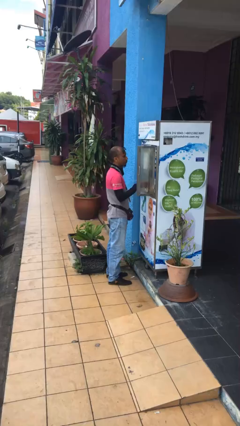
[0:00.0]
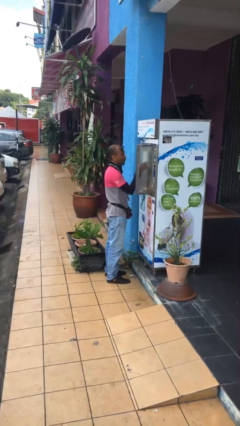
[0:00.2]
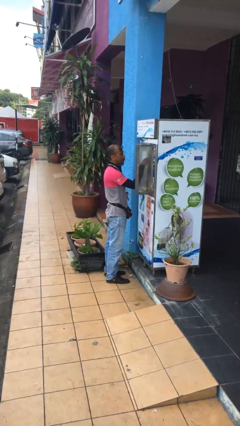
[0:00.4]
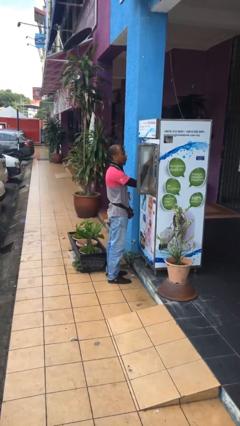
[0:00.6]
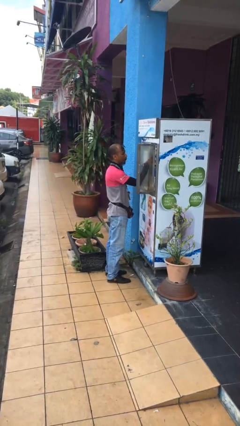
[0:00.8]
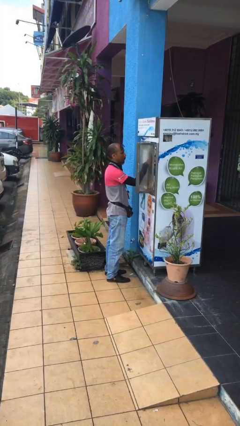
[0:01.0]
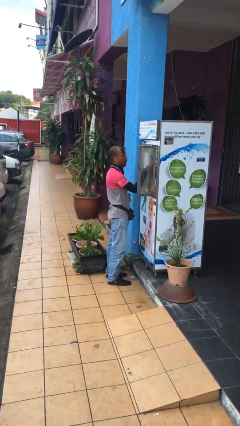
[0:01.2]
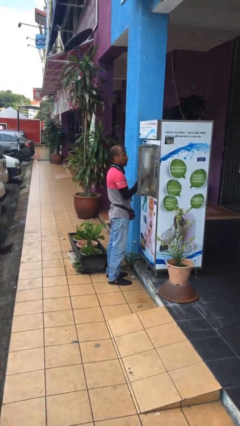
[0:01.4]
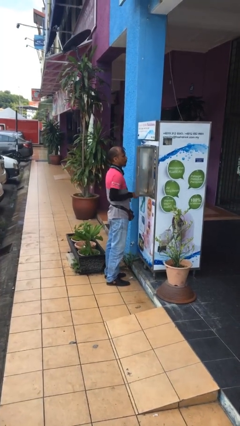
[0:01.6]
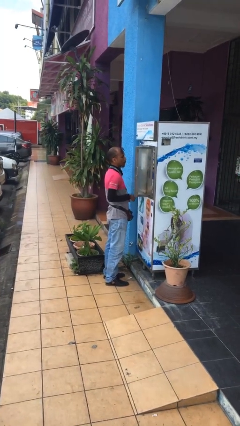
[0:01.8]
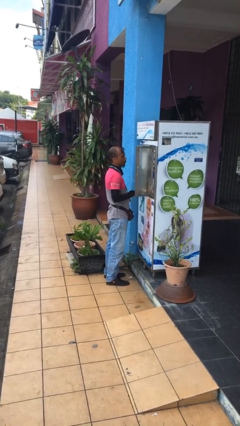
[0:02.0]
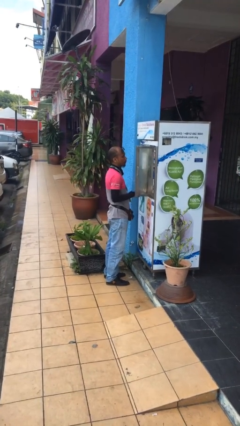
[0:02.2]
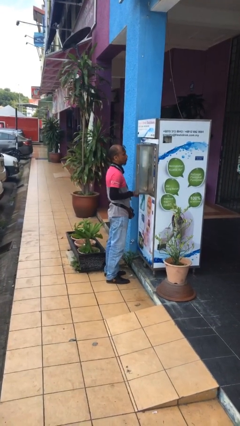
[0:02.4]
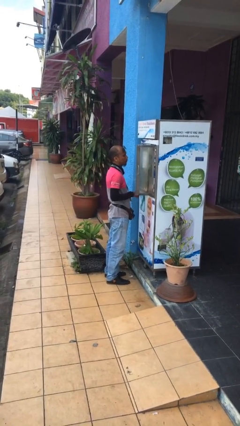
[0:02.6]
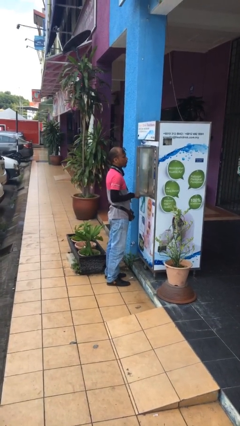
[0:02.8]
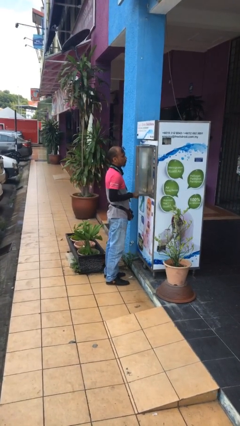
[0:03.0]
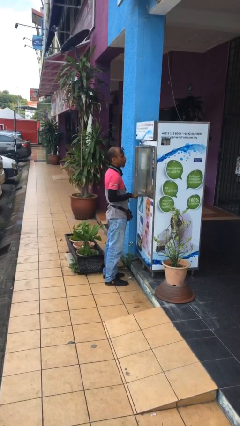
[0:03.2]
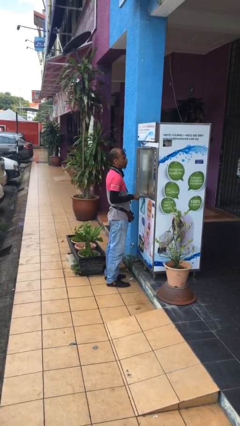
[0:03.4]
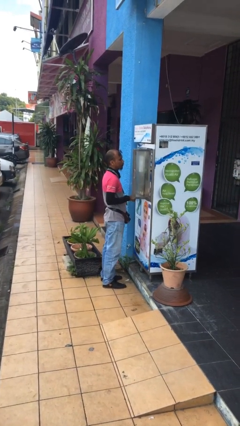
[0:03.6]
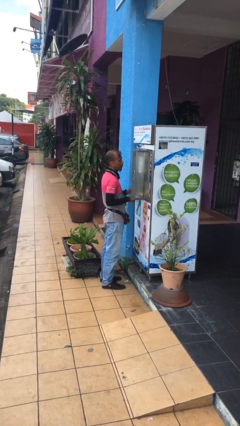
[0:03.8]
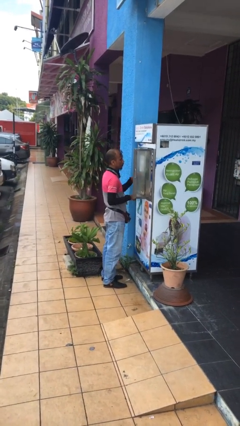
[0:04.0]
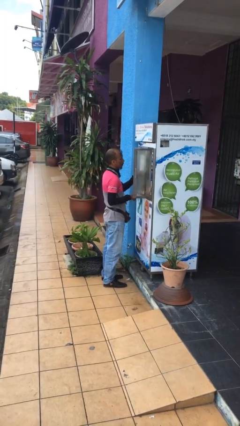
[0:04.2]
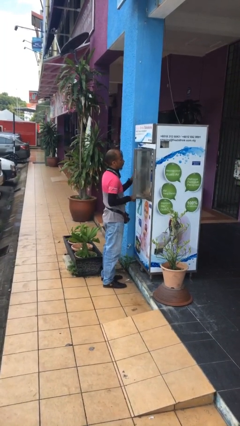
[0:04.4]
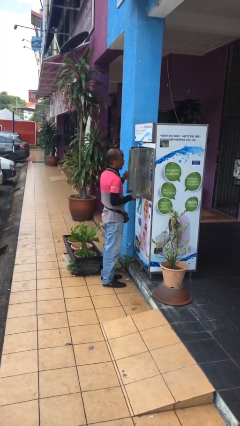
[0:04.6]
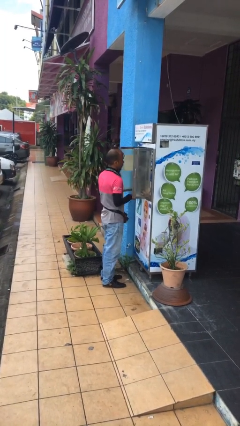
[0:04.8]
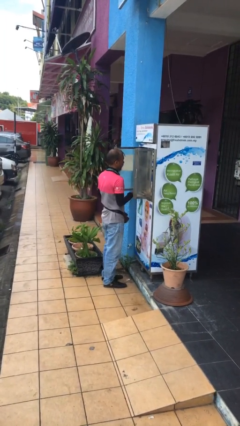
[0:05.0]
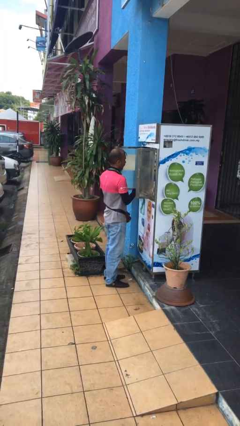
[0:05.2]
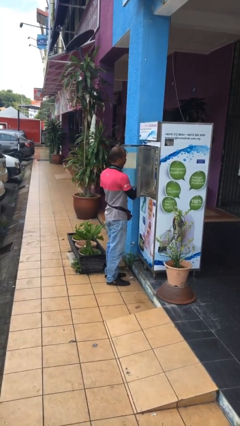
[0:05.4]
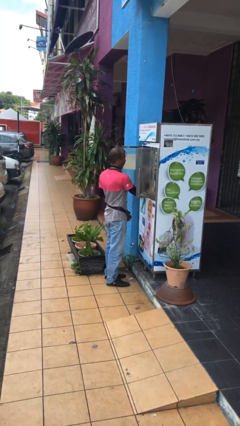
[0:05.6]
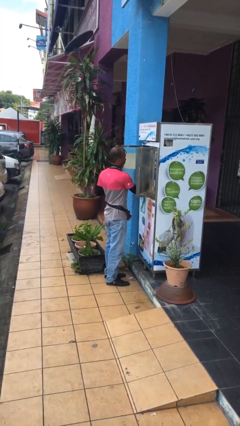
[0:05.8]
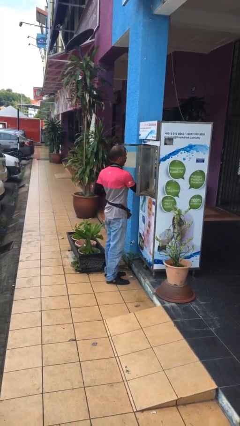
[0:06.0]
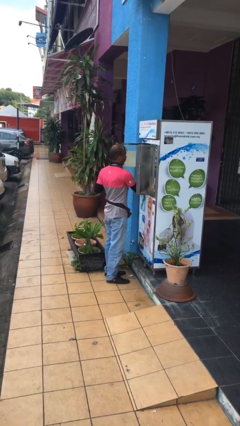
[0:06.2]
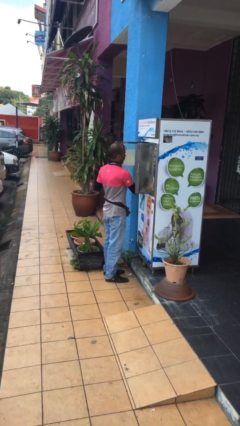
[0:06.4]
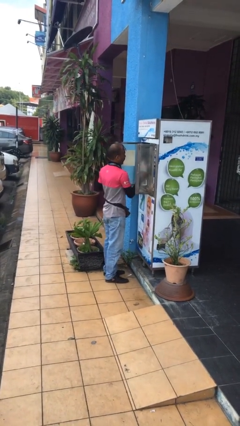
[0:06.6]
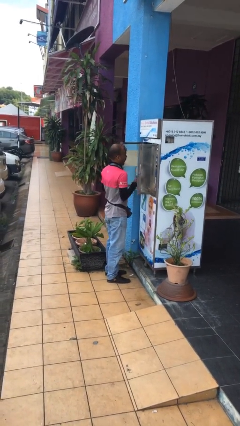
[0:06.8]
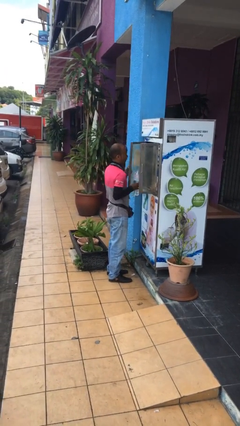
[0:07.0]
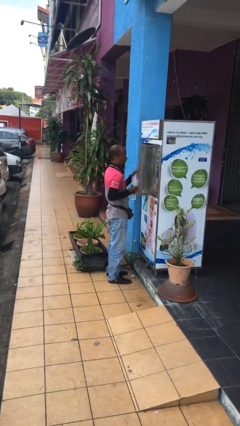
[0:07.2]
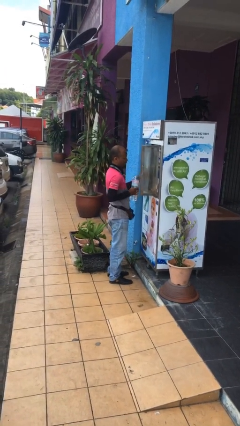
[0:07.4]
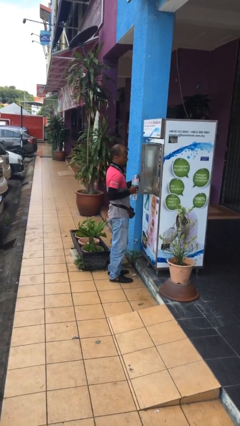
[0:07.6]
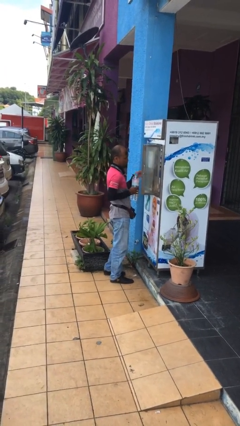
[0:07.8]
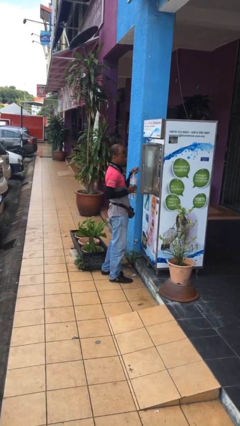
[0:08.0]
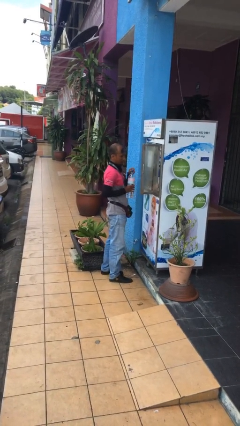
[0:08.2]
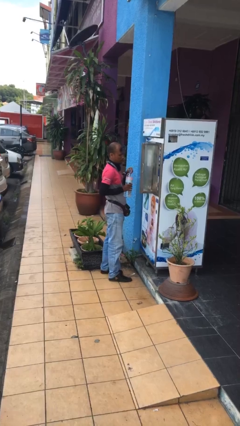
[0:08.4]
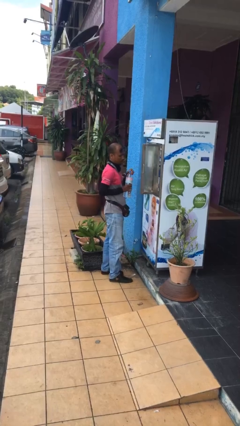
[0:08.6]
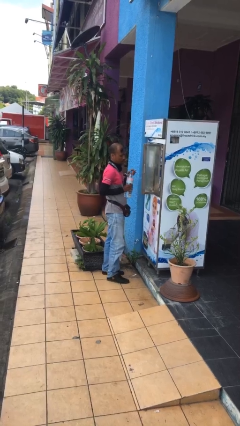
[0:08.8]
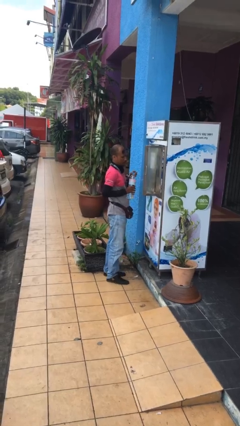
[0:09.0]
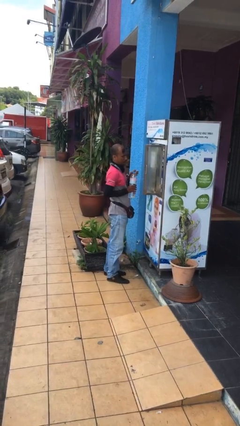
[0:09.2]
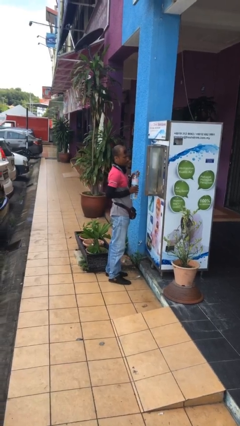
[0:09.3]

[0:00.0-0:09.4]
person purchases from machine

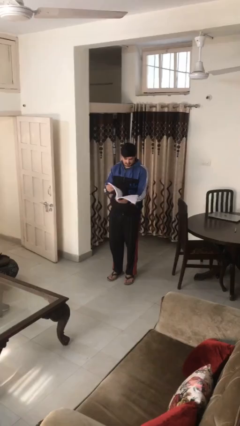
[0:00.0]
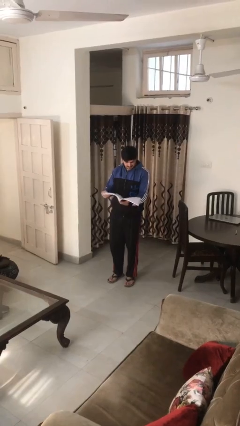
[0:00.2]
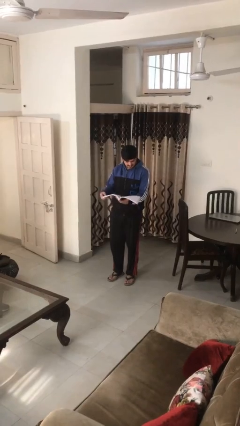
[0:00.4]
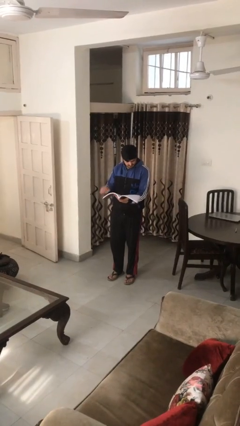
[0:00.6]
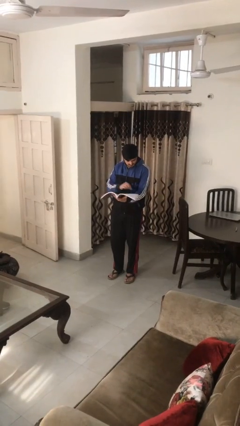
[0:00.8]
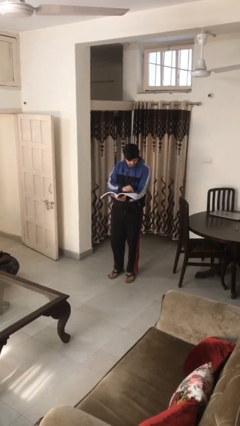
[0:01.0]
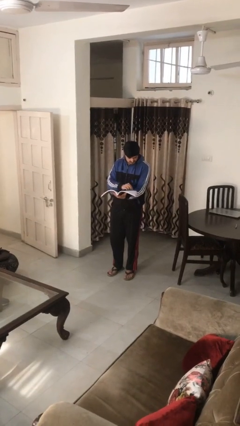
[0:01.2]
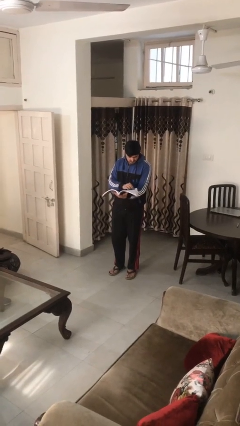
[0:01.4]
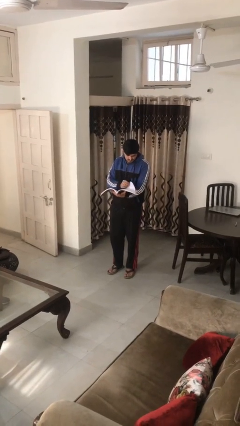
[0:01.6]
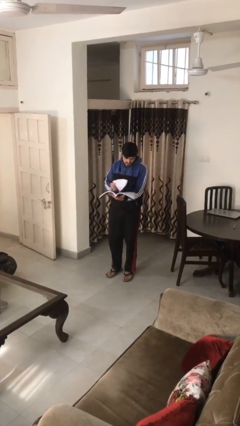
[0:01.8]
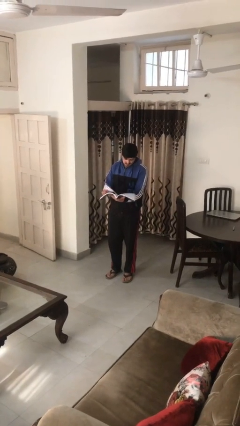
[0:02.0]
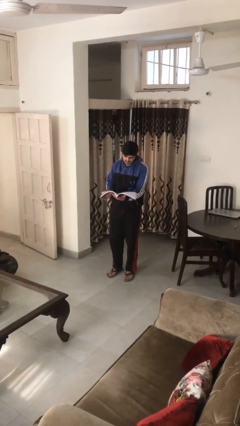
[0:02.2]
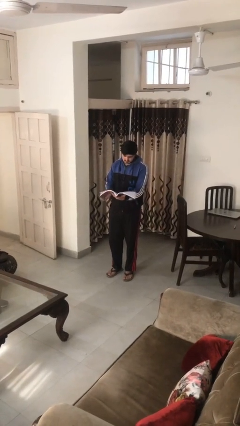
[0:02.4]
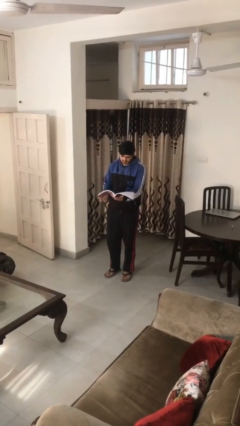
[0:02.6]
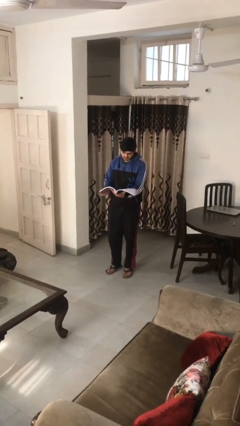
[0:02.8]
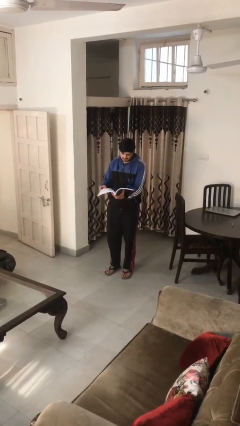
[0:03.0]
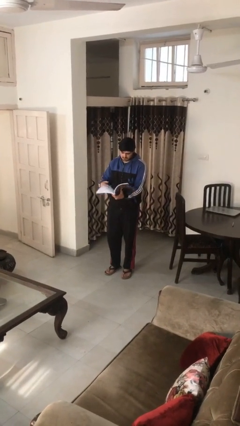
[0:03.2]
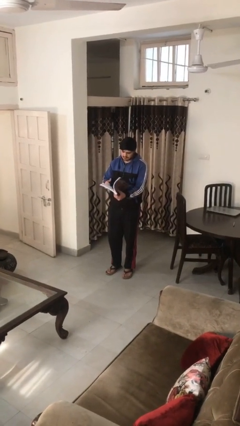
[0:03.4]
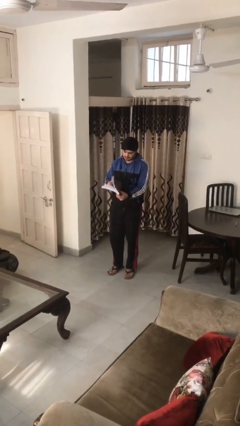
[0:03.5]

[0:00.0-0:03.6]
person reads document

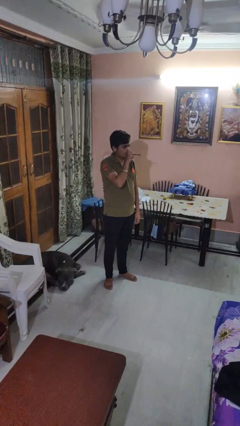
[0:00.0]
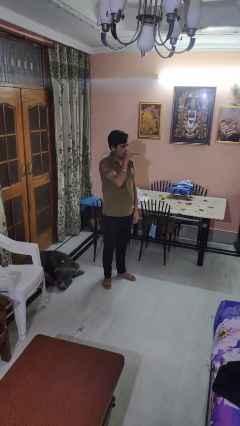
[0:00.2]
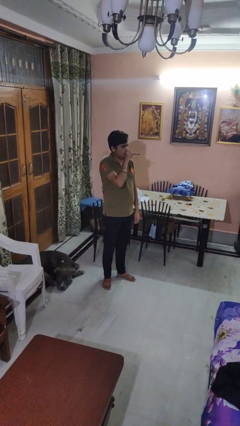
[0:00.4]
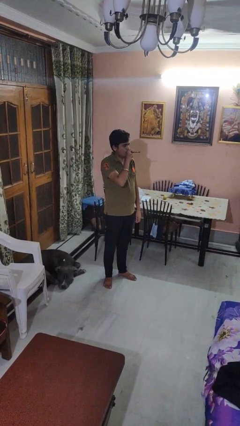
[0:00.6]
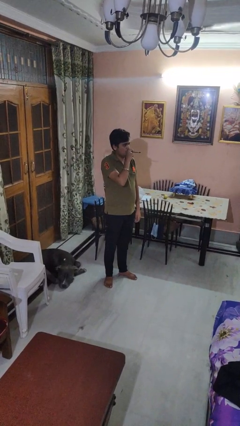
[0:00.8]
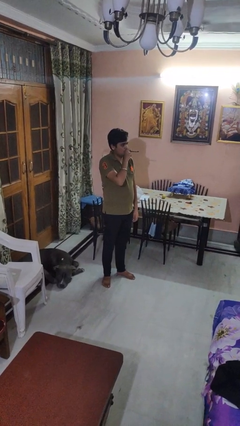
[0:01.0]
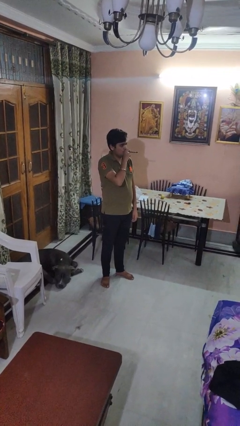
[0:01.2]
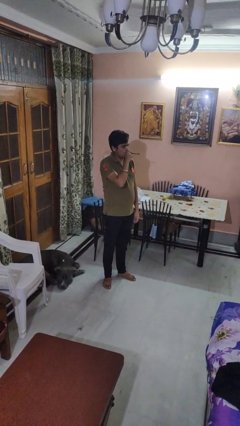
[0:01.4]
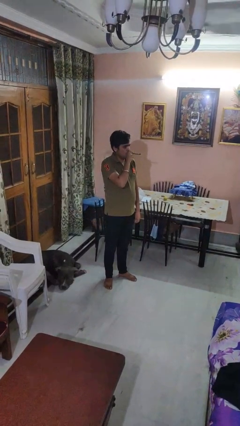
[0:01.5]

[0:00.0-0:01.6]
person vapes

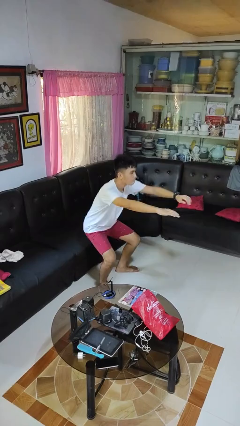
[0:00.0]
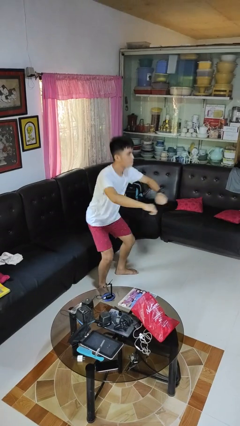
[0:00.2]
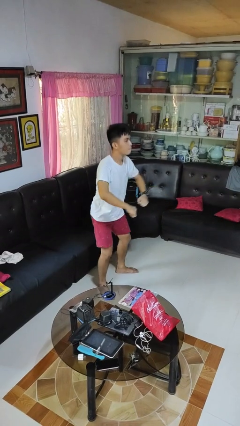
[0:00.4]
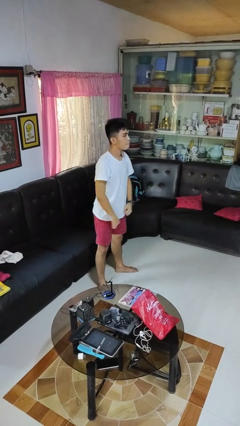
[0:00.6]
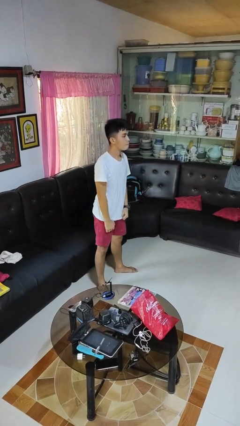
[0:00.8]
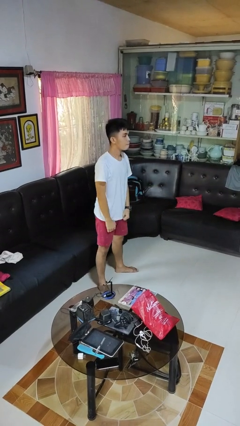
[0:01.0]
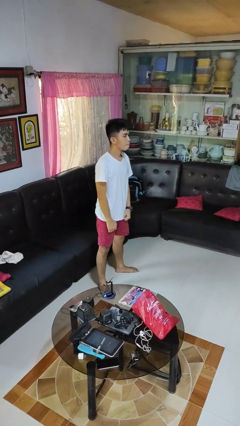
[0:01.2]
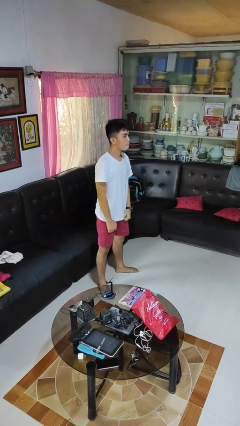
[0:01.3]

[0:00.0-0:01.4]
person stands up

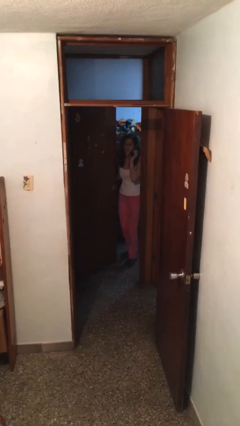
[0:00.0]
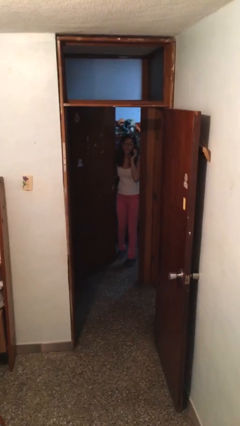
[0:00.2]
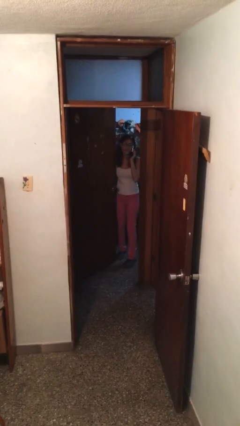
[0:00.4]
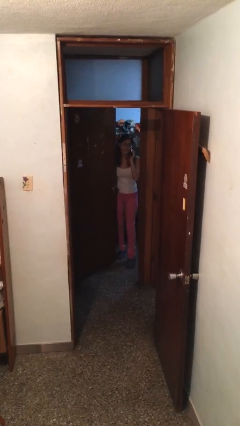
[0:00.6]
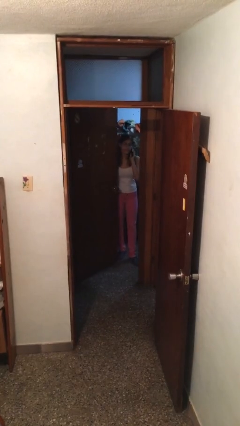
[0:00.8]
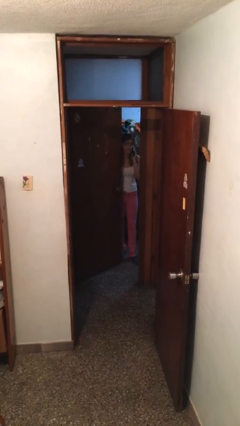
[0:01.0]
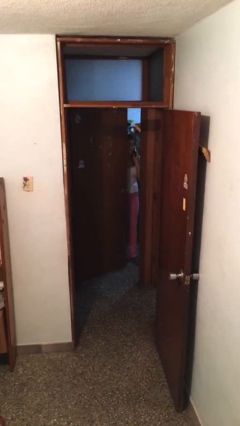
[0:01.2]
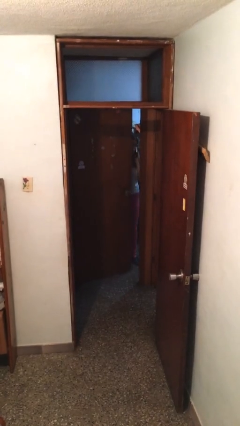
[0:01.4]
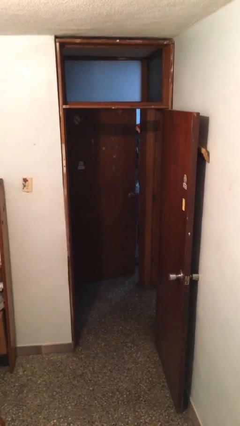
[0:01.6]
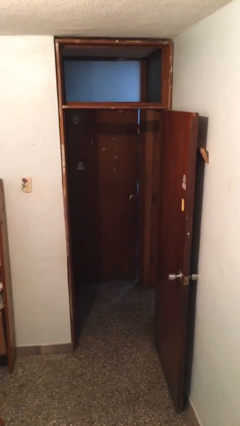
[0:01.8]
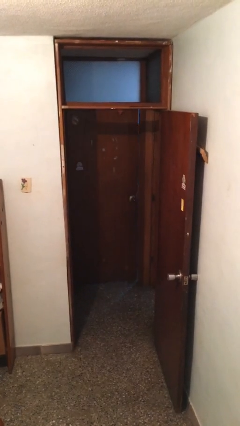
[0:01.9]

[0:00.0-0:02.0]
person closes facility door
